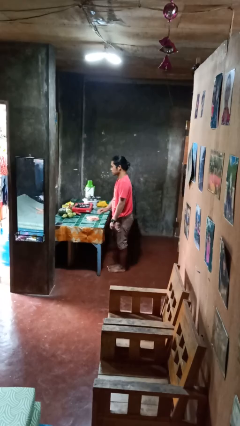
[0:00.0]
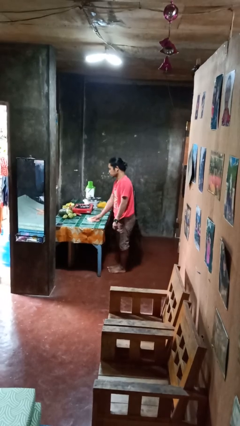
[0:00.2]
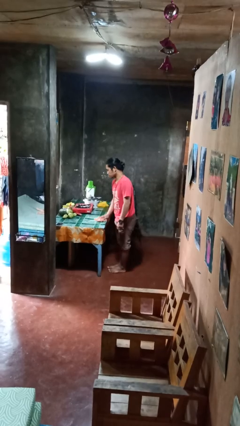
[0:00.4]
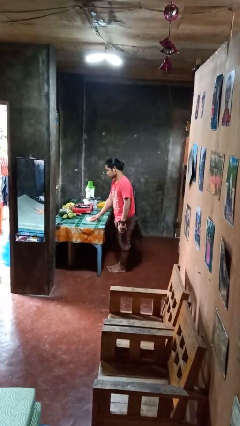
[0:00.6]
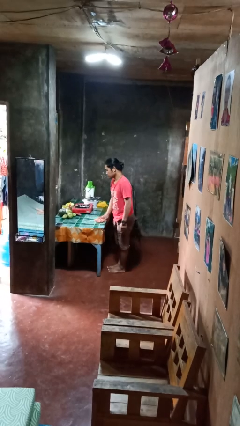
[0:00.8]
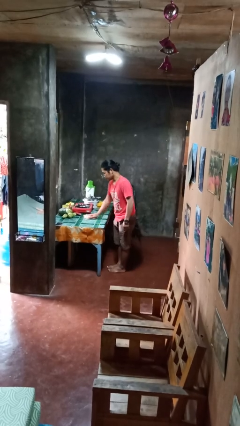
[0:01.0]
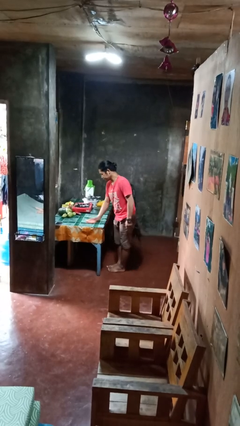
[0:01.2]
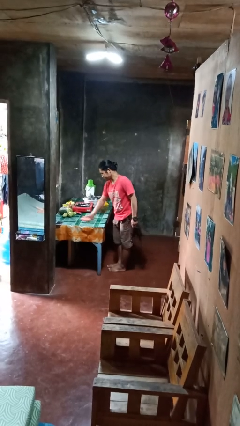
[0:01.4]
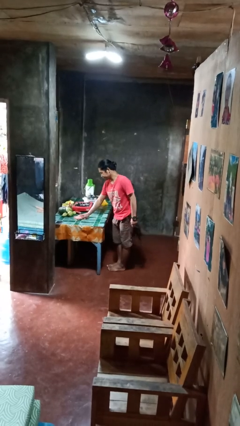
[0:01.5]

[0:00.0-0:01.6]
person cleans table with rag

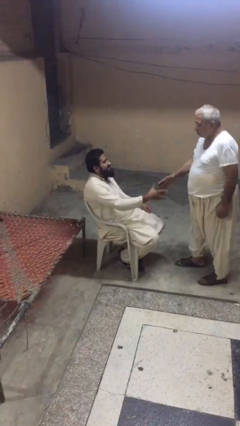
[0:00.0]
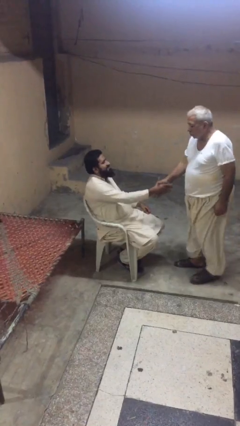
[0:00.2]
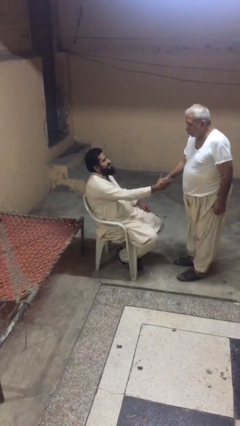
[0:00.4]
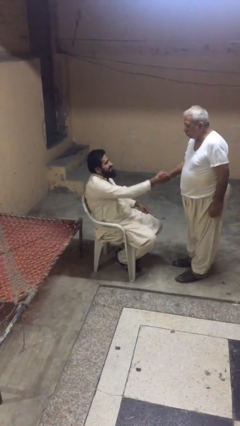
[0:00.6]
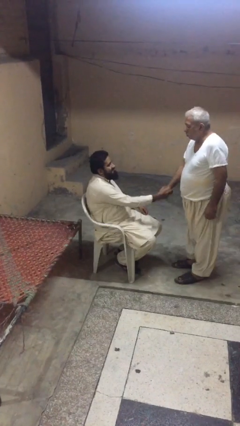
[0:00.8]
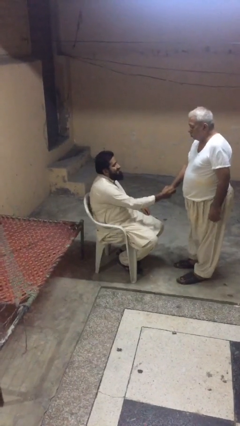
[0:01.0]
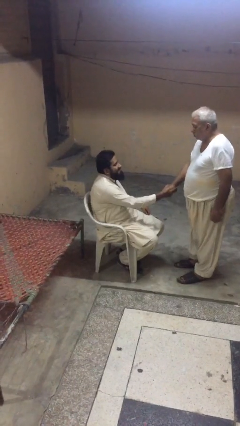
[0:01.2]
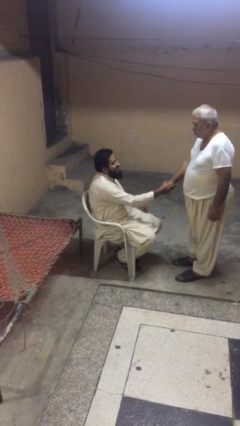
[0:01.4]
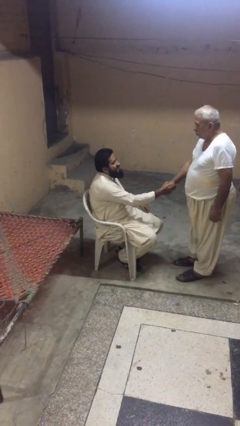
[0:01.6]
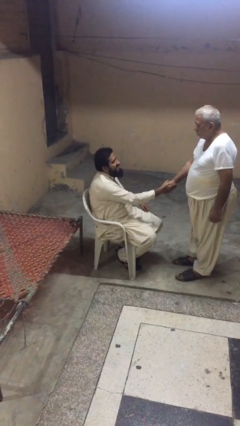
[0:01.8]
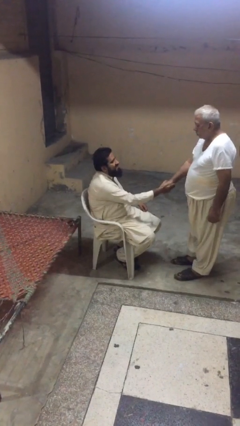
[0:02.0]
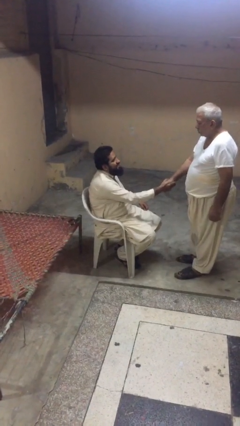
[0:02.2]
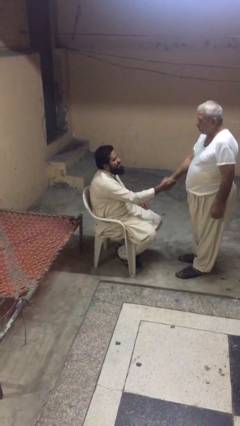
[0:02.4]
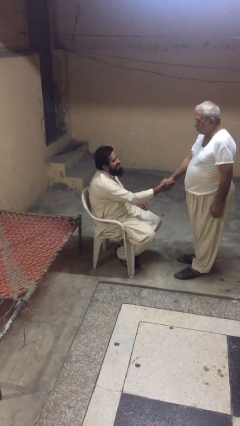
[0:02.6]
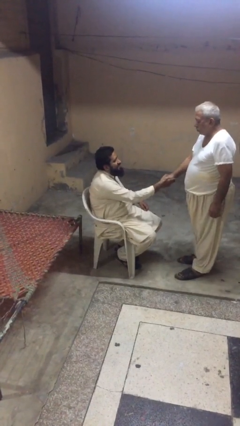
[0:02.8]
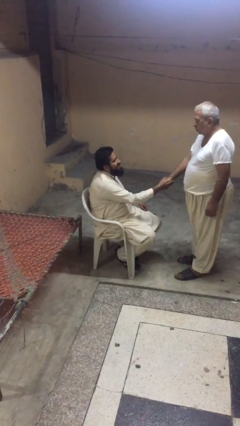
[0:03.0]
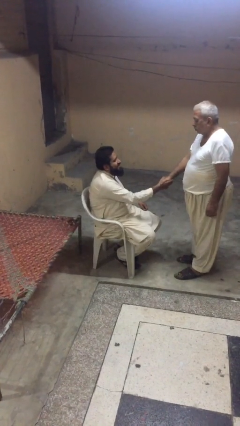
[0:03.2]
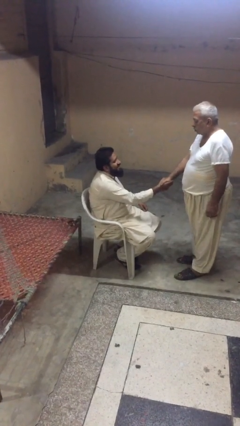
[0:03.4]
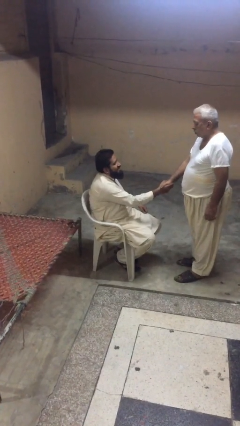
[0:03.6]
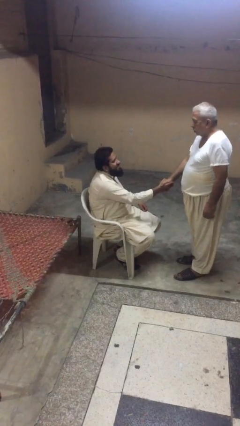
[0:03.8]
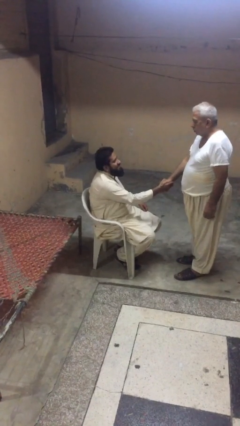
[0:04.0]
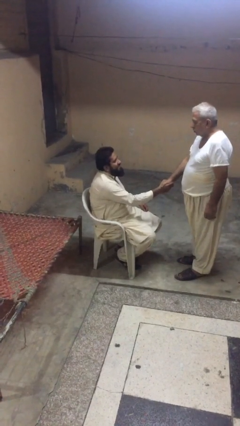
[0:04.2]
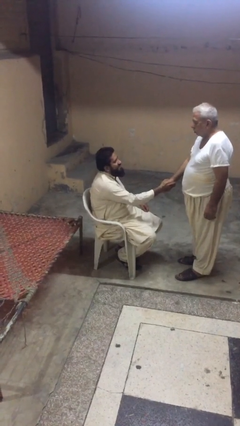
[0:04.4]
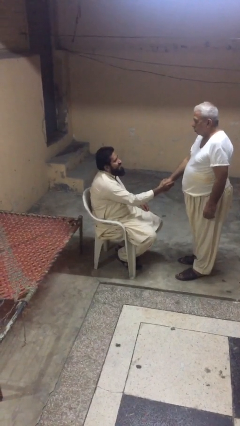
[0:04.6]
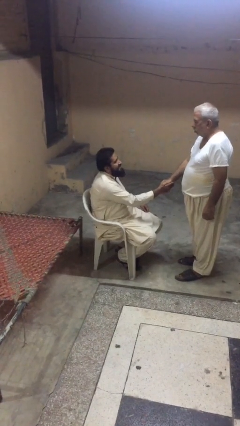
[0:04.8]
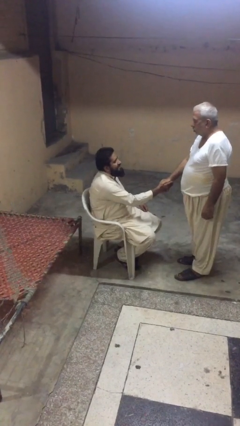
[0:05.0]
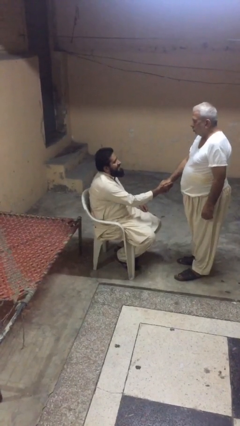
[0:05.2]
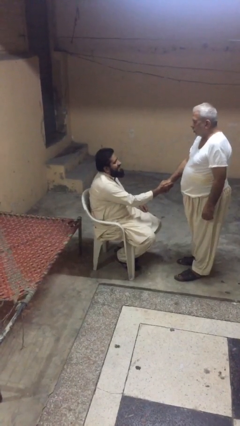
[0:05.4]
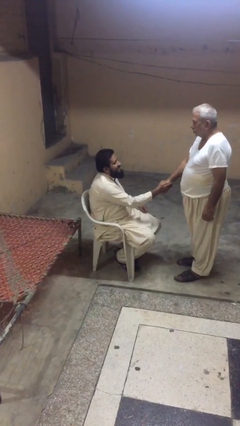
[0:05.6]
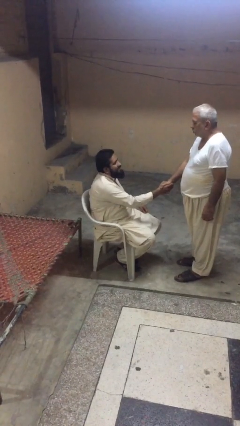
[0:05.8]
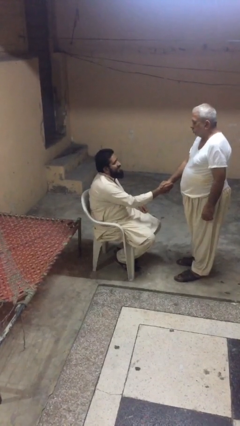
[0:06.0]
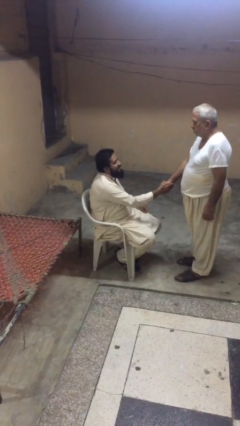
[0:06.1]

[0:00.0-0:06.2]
person shakes hand

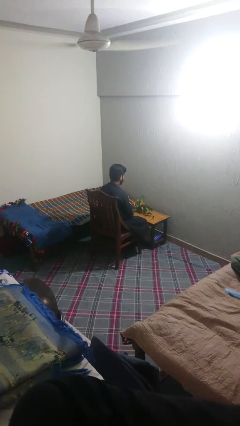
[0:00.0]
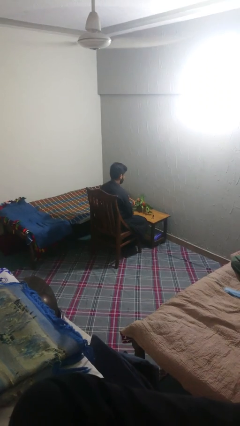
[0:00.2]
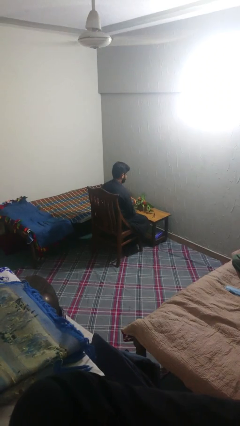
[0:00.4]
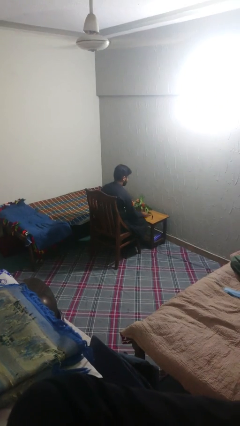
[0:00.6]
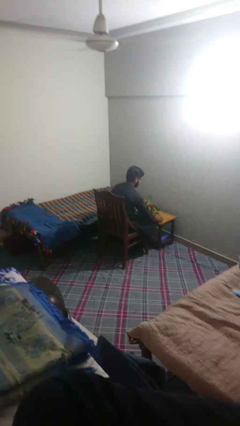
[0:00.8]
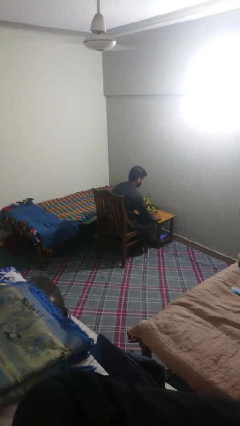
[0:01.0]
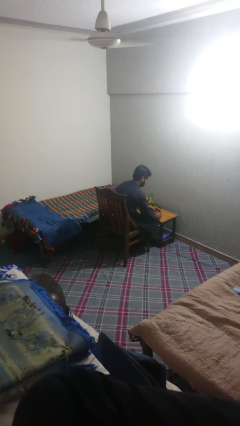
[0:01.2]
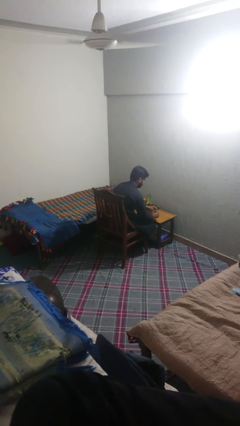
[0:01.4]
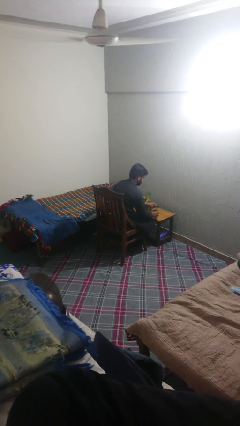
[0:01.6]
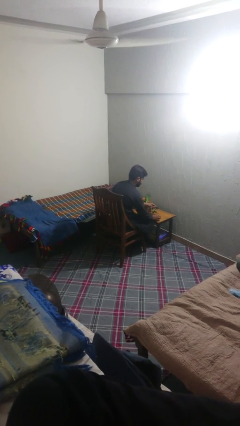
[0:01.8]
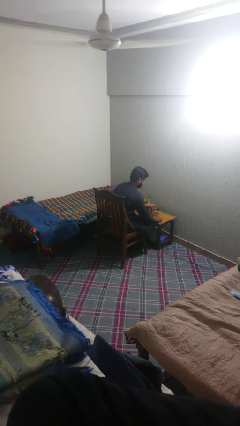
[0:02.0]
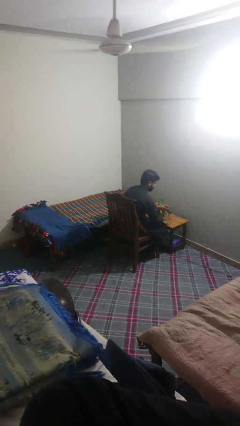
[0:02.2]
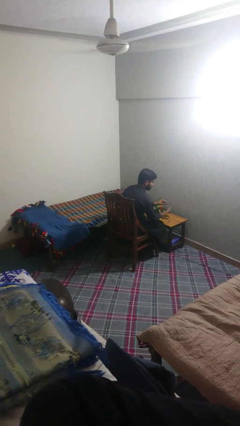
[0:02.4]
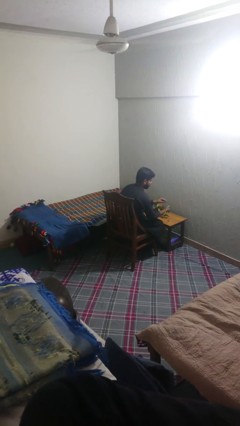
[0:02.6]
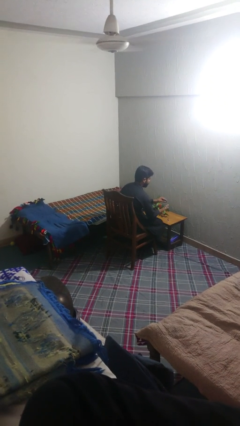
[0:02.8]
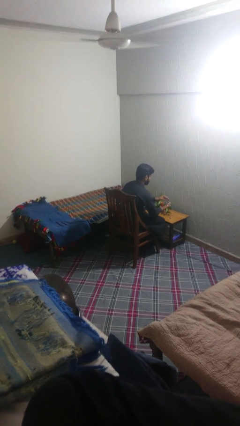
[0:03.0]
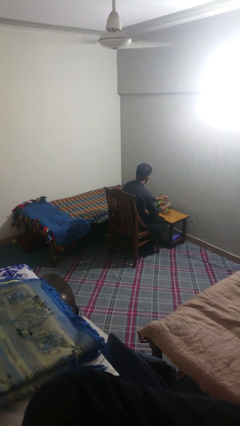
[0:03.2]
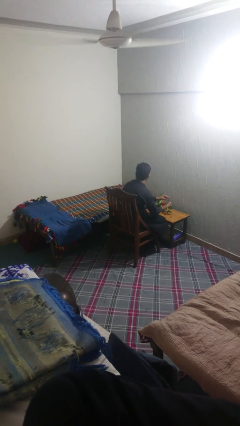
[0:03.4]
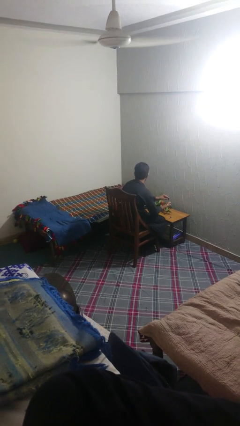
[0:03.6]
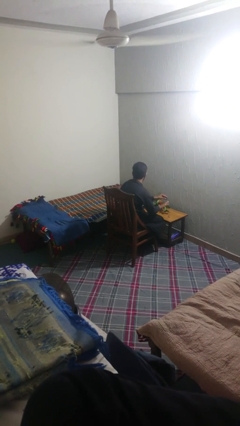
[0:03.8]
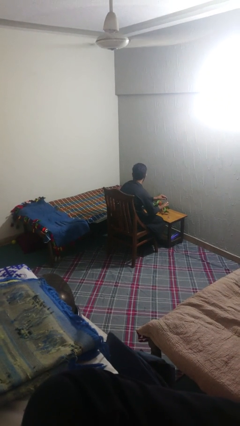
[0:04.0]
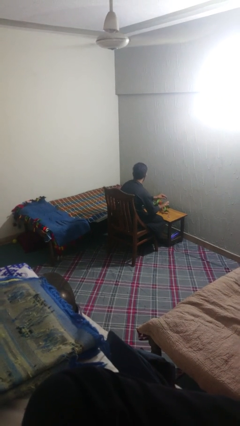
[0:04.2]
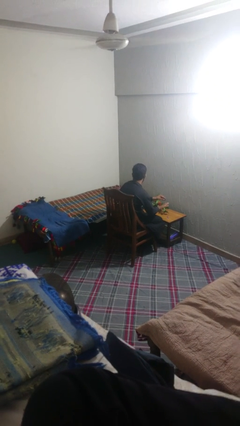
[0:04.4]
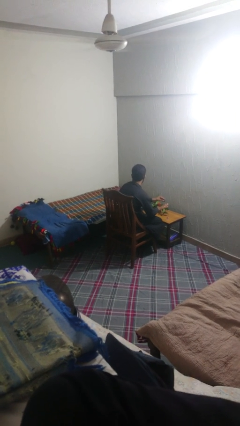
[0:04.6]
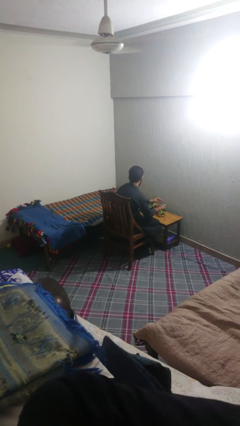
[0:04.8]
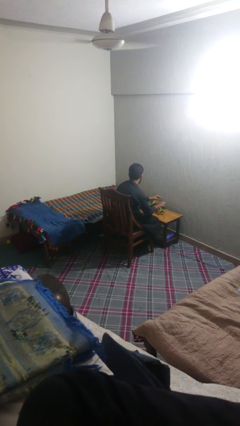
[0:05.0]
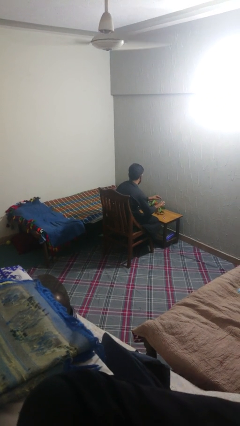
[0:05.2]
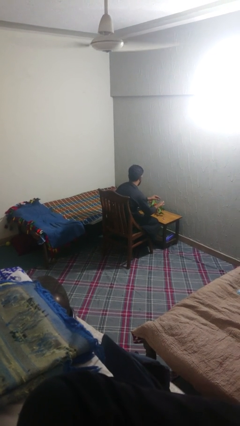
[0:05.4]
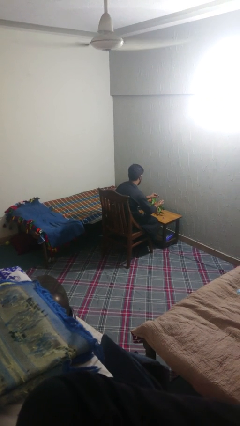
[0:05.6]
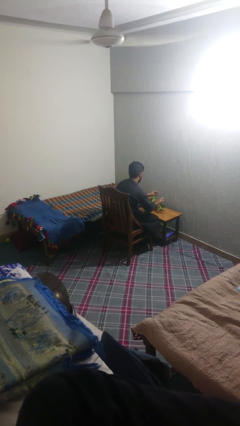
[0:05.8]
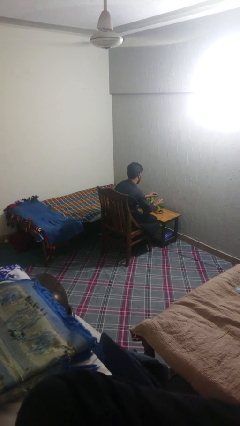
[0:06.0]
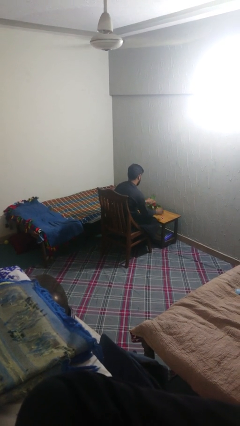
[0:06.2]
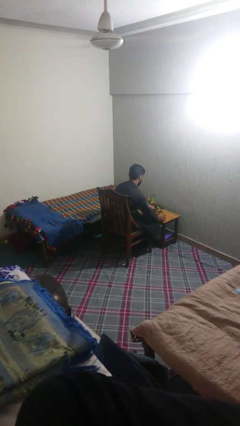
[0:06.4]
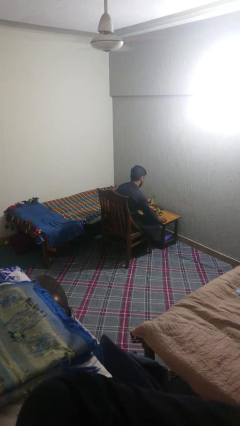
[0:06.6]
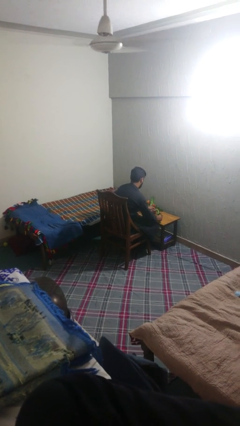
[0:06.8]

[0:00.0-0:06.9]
person paints fingernails

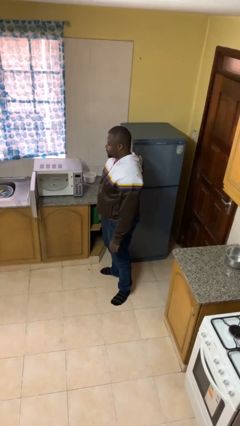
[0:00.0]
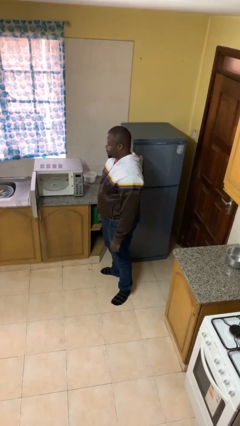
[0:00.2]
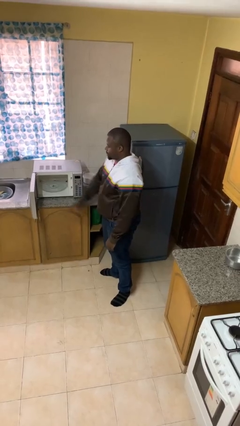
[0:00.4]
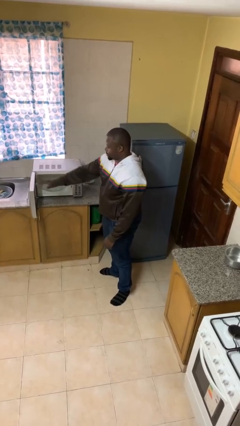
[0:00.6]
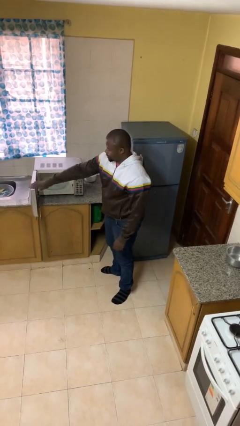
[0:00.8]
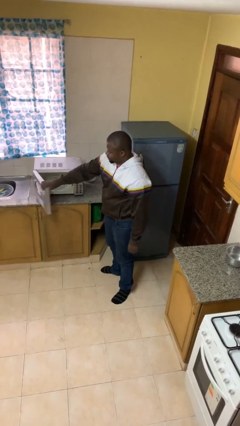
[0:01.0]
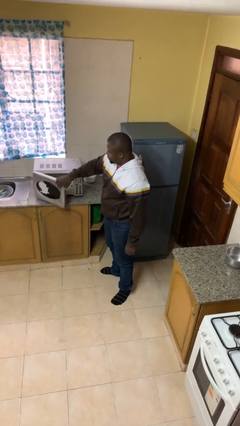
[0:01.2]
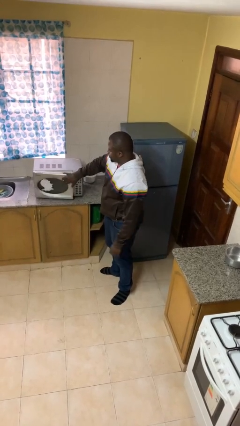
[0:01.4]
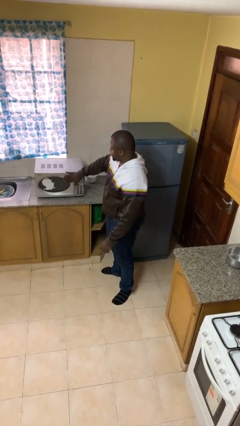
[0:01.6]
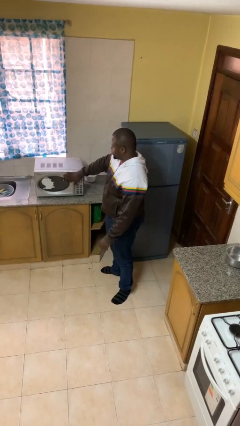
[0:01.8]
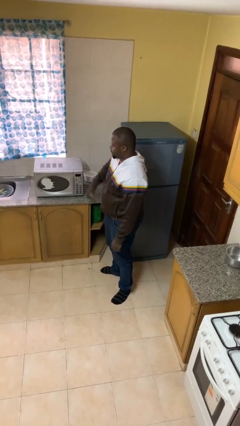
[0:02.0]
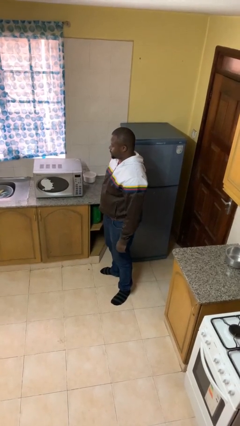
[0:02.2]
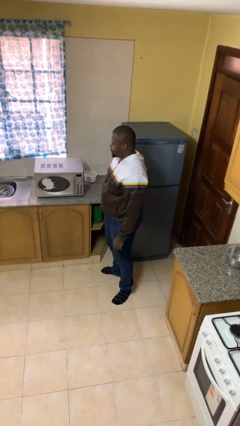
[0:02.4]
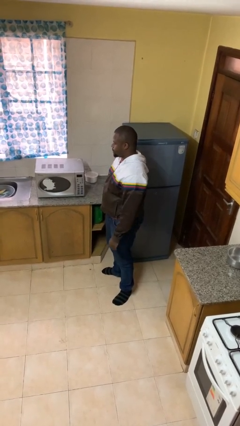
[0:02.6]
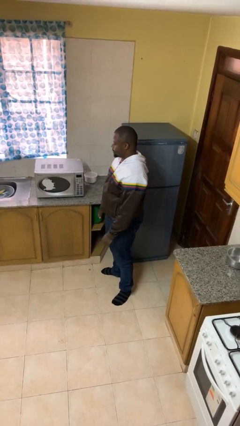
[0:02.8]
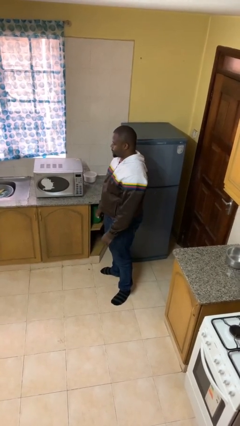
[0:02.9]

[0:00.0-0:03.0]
person closes microwave

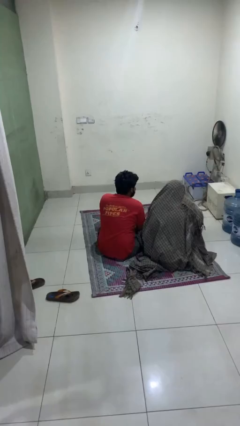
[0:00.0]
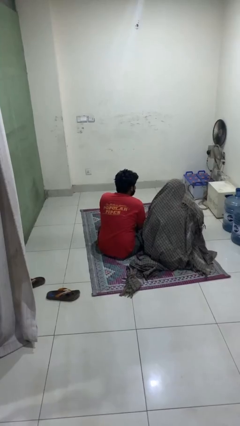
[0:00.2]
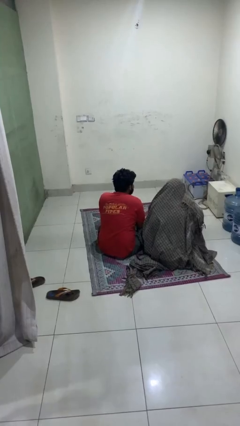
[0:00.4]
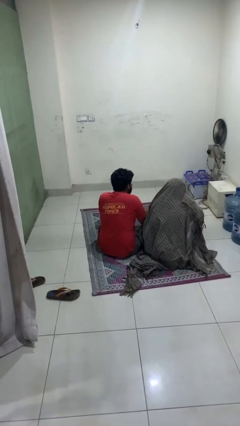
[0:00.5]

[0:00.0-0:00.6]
person uncovers friend with blanket
